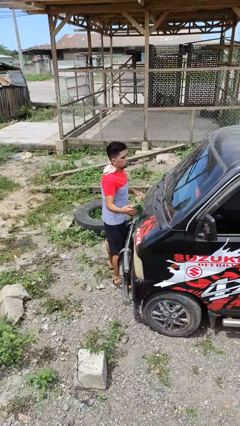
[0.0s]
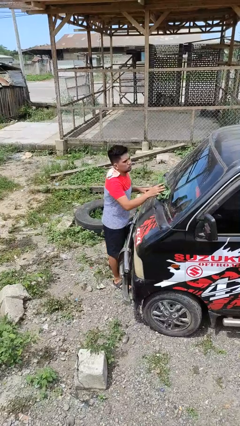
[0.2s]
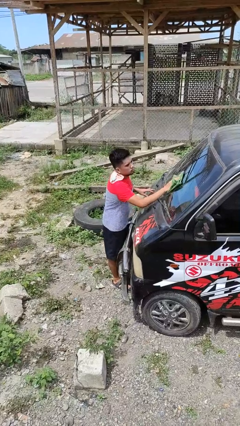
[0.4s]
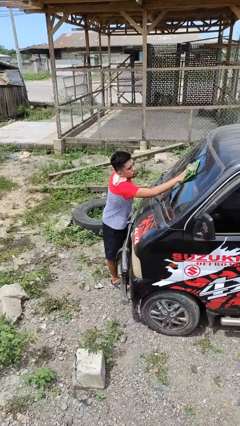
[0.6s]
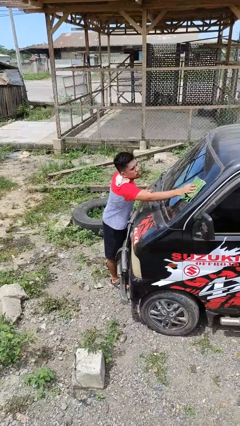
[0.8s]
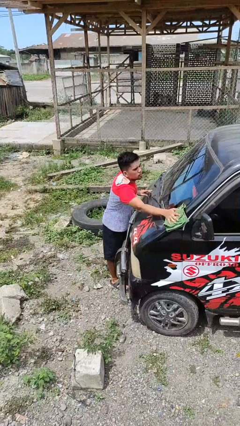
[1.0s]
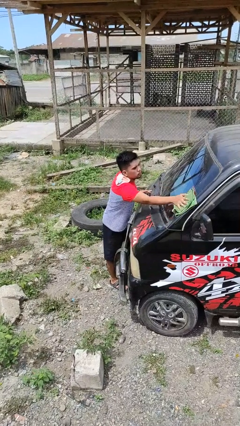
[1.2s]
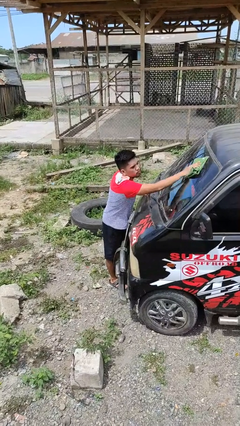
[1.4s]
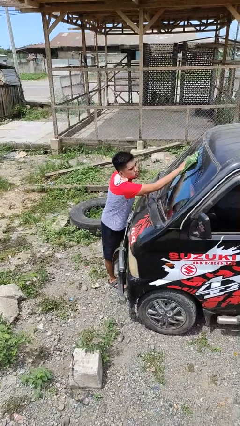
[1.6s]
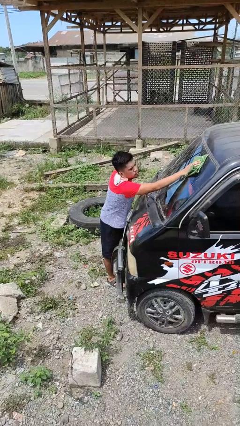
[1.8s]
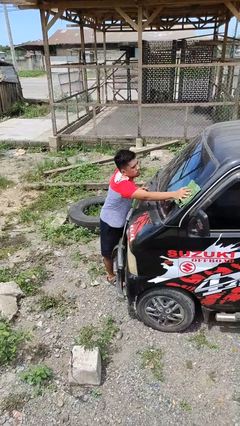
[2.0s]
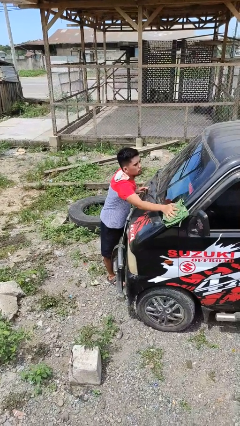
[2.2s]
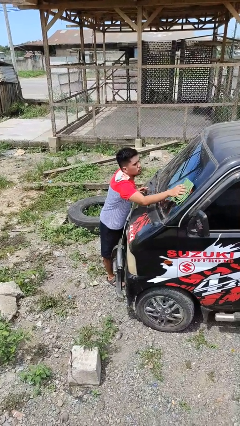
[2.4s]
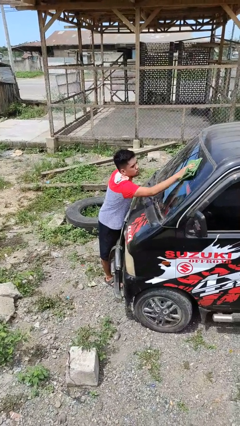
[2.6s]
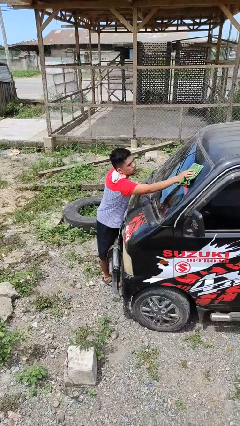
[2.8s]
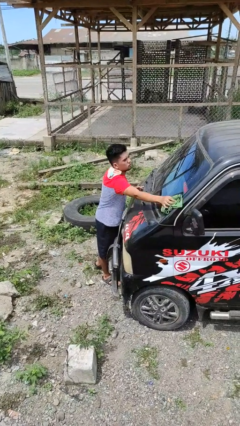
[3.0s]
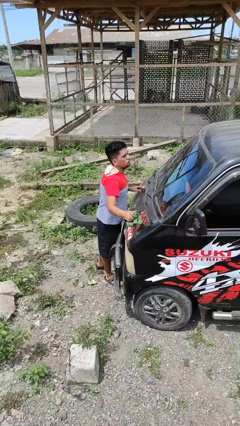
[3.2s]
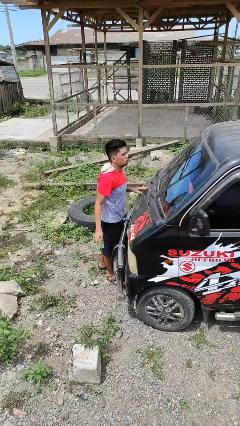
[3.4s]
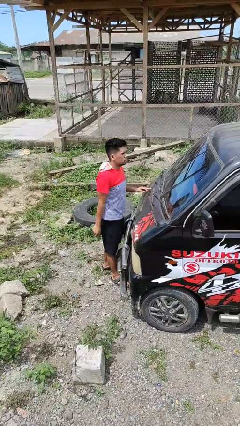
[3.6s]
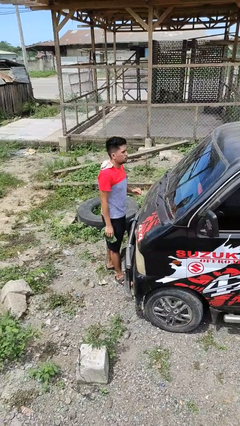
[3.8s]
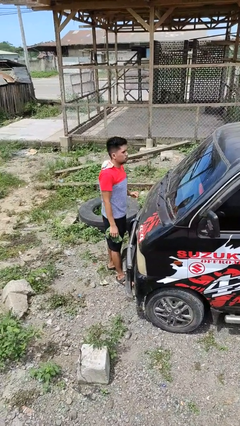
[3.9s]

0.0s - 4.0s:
person polishes car with rag

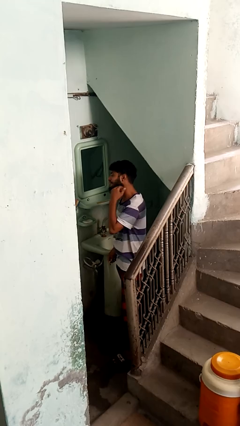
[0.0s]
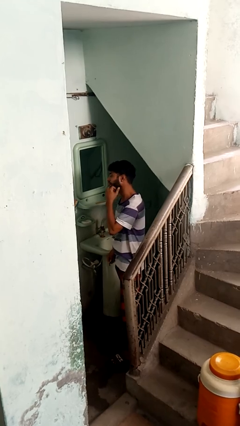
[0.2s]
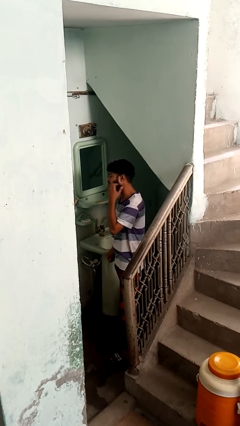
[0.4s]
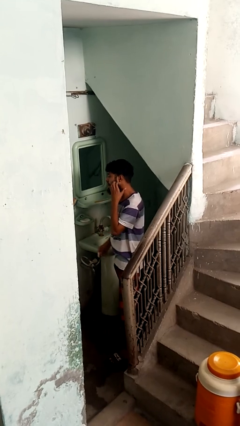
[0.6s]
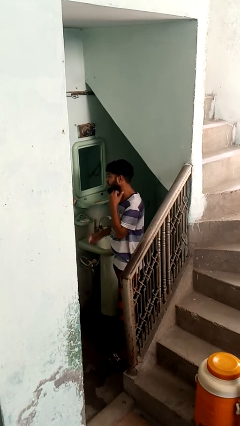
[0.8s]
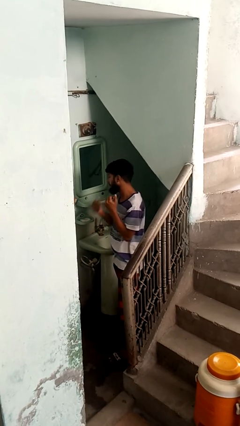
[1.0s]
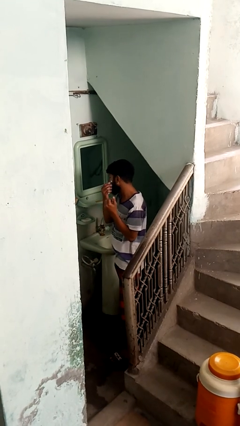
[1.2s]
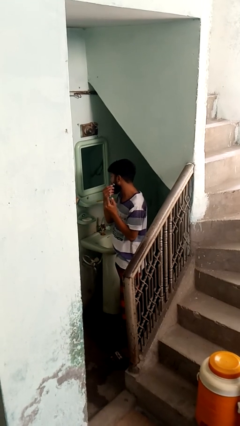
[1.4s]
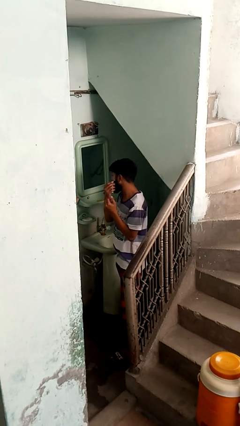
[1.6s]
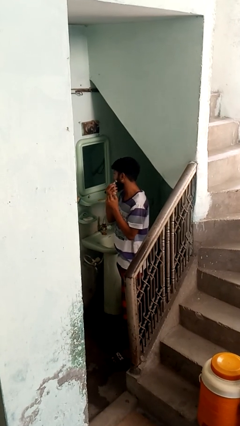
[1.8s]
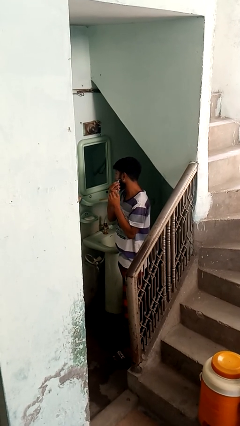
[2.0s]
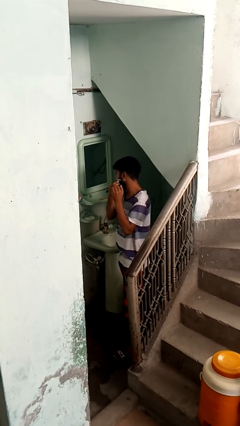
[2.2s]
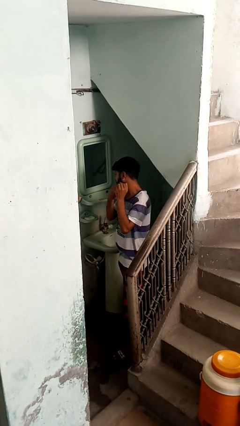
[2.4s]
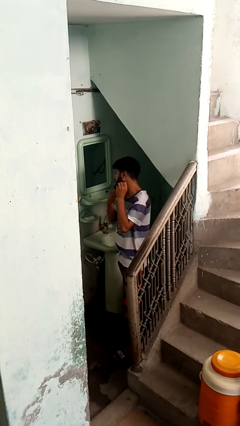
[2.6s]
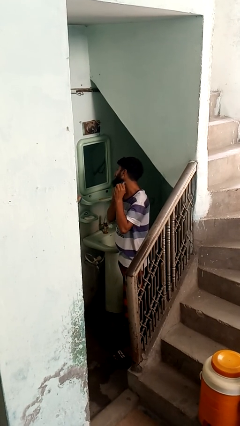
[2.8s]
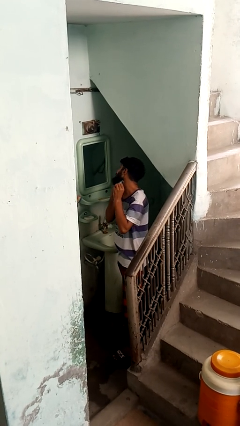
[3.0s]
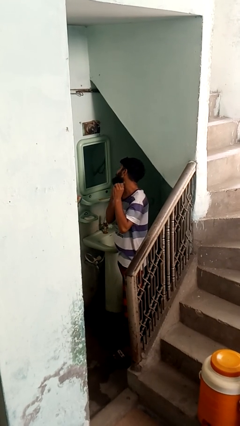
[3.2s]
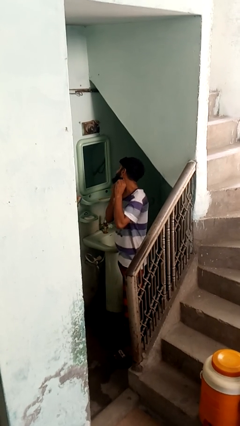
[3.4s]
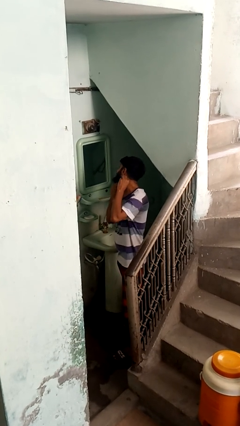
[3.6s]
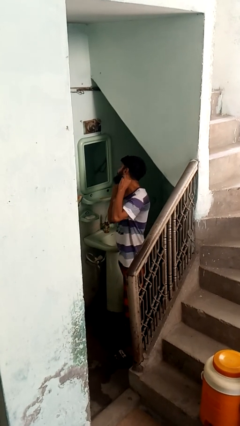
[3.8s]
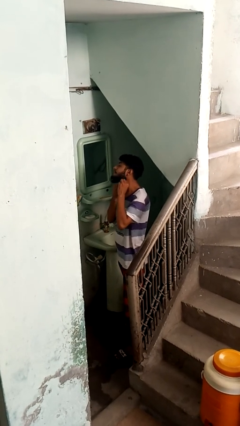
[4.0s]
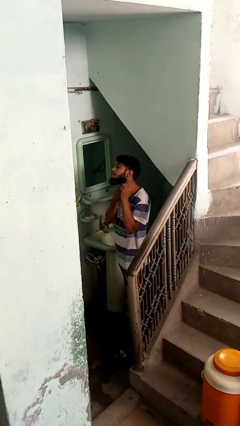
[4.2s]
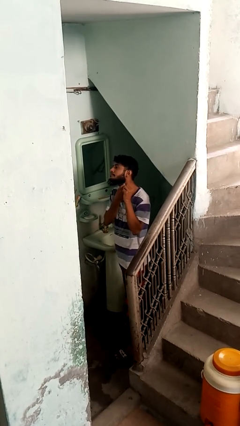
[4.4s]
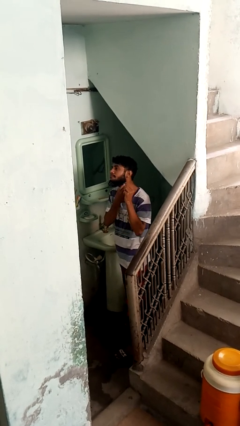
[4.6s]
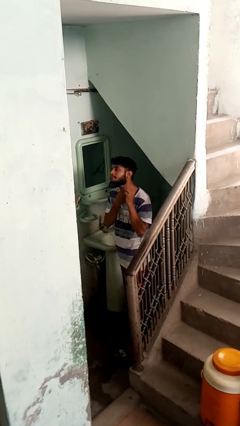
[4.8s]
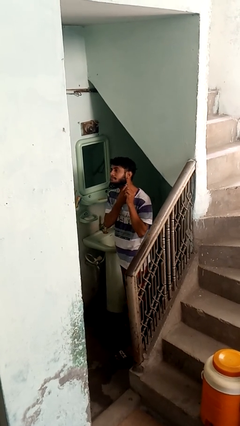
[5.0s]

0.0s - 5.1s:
person shaves face

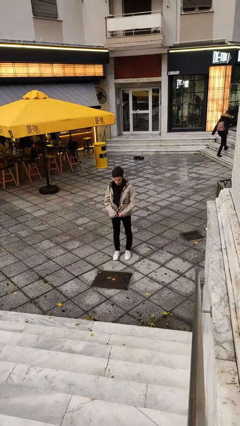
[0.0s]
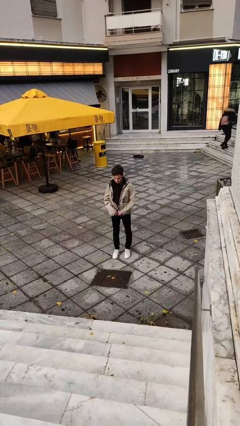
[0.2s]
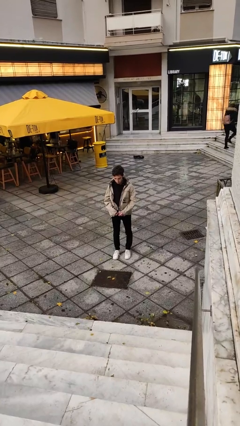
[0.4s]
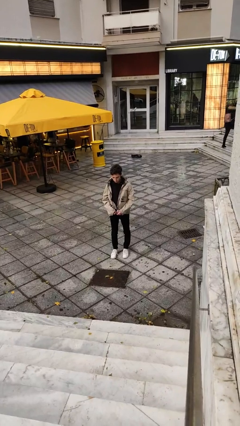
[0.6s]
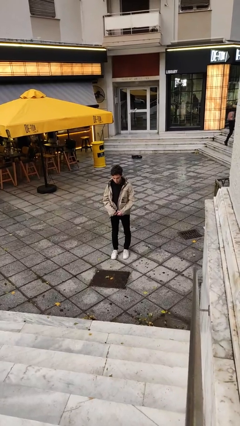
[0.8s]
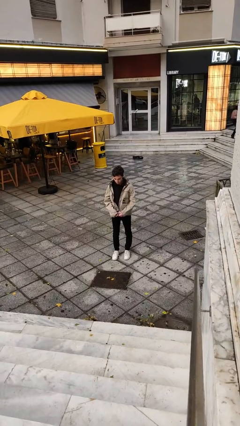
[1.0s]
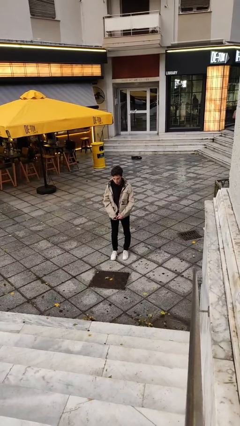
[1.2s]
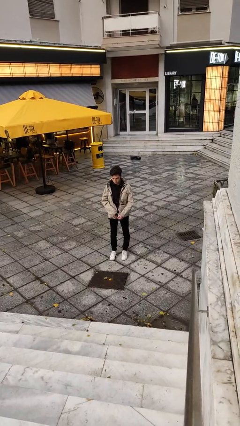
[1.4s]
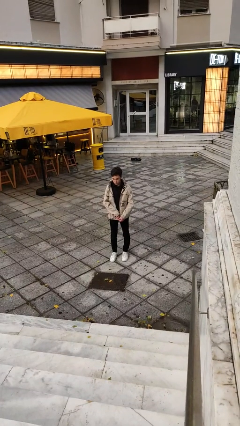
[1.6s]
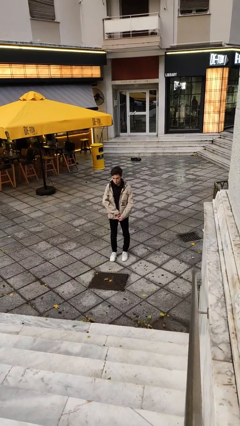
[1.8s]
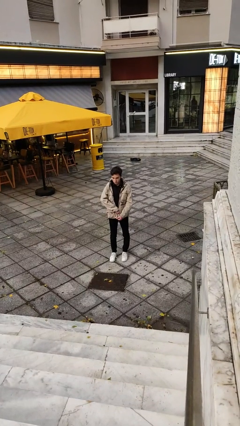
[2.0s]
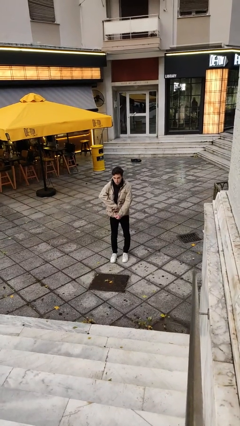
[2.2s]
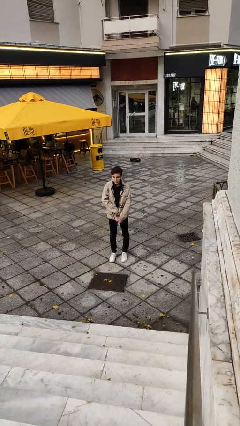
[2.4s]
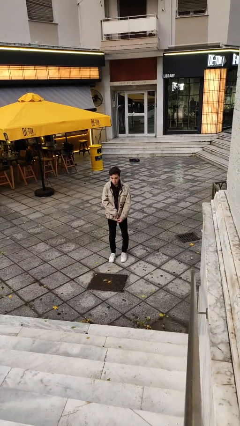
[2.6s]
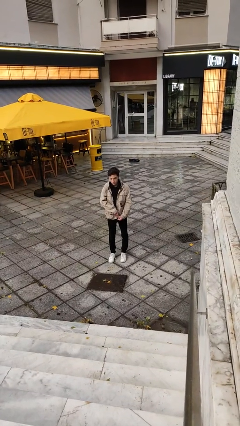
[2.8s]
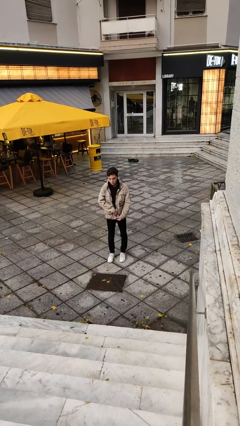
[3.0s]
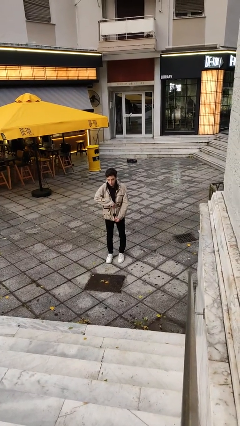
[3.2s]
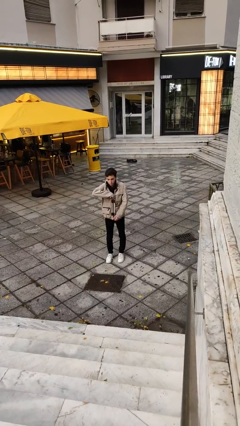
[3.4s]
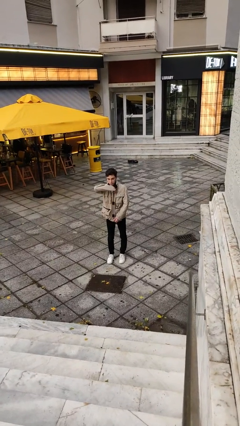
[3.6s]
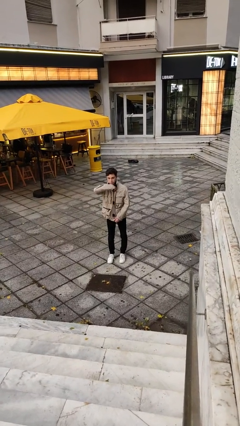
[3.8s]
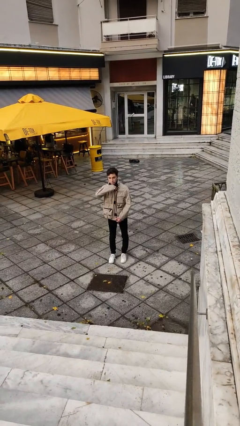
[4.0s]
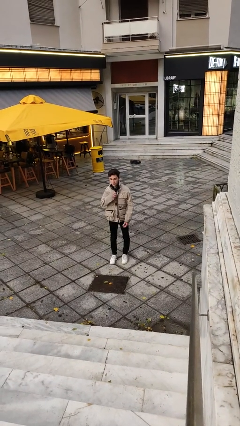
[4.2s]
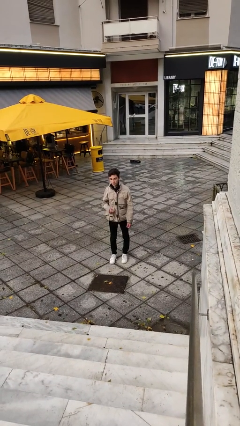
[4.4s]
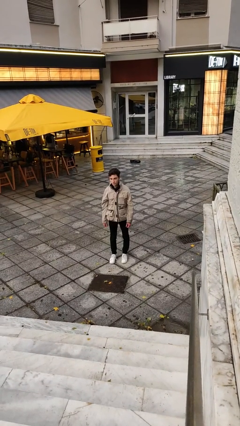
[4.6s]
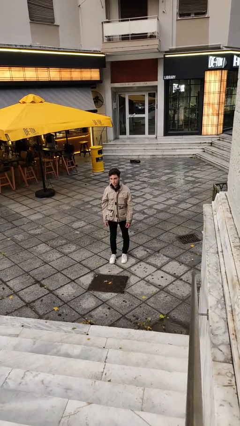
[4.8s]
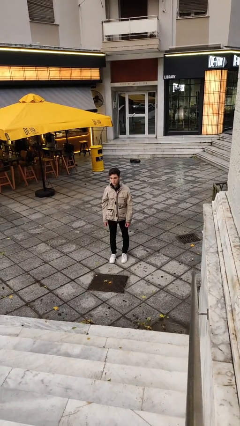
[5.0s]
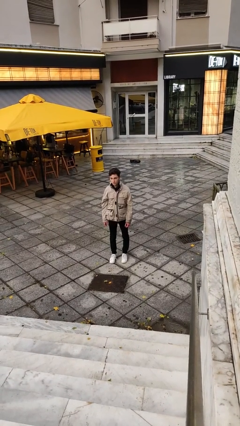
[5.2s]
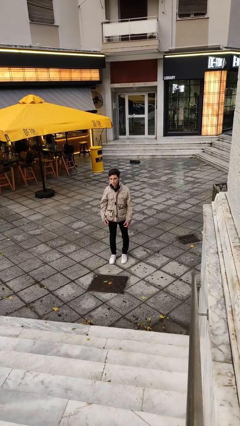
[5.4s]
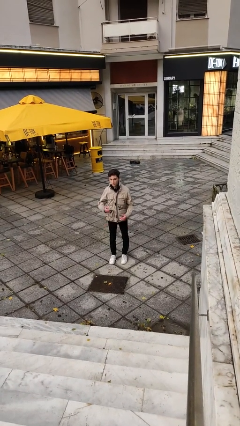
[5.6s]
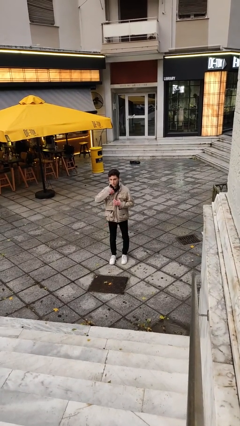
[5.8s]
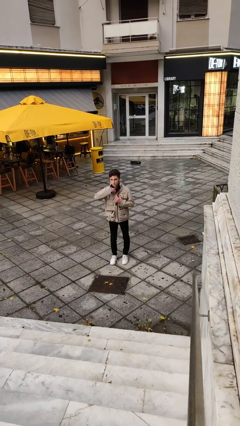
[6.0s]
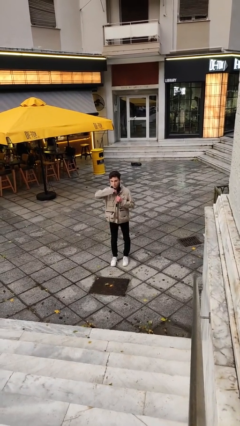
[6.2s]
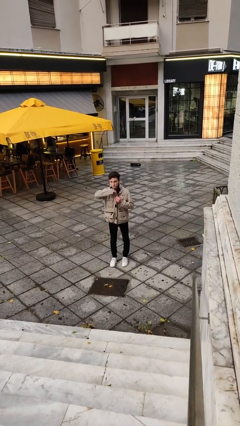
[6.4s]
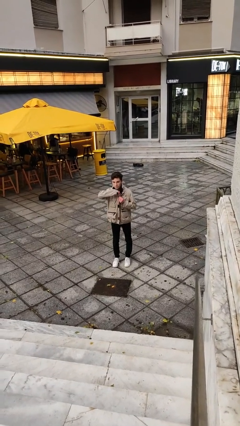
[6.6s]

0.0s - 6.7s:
person zips up jacket

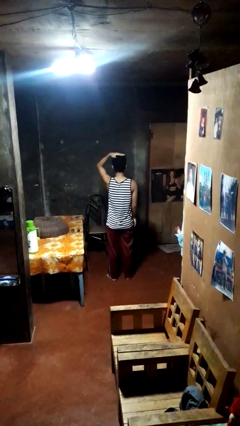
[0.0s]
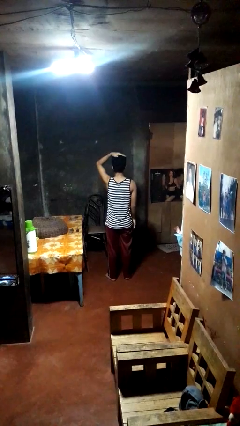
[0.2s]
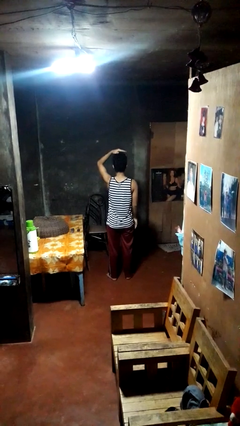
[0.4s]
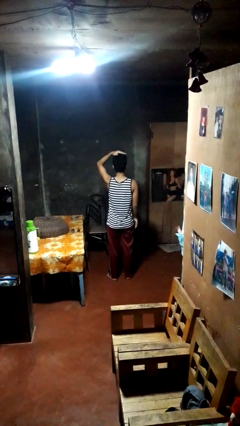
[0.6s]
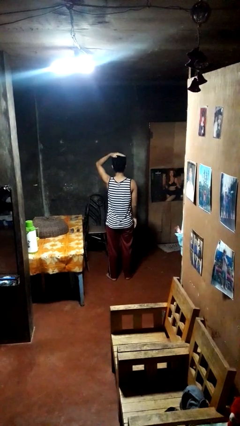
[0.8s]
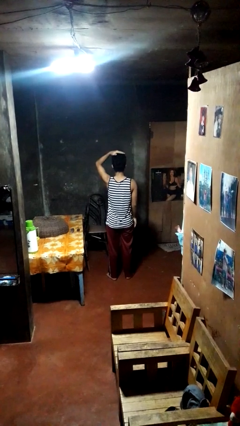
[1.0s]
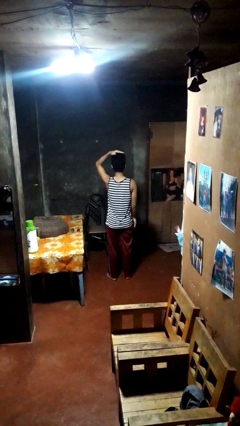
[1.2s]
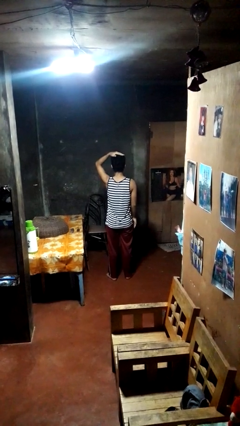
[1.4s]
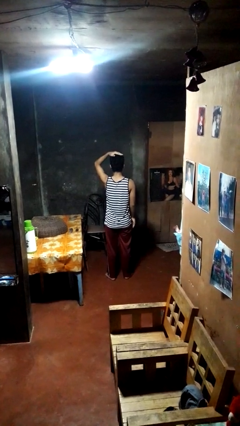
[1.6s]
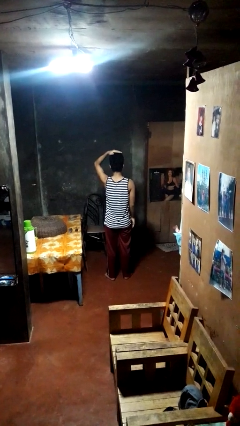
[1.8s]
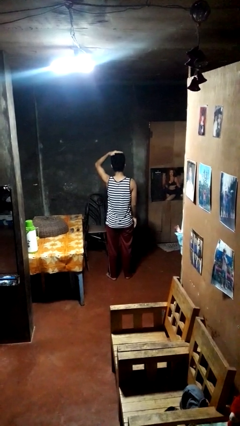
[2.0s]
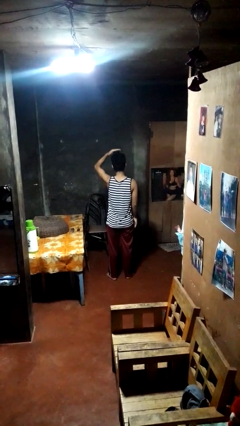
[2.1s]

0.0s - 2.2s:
person pats head

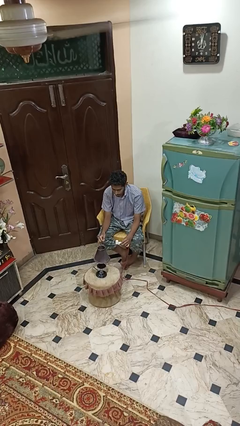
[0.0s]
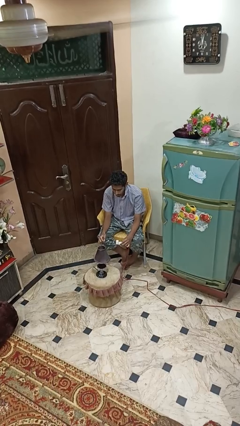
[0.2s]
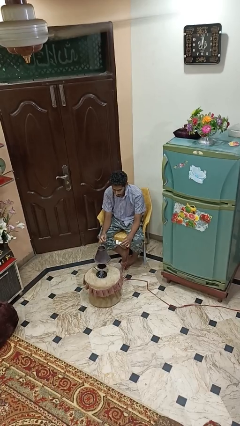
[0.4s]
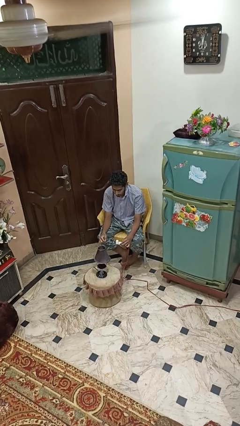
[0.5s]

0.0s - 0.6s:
person turns off lamp
